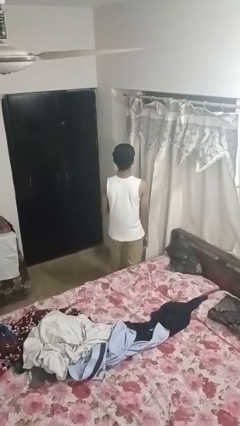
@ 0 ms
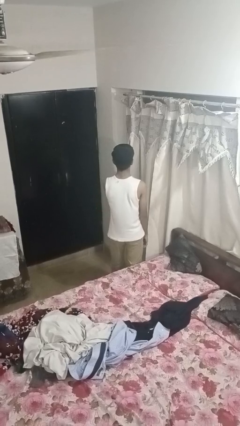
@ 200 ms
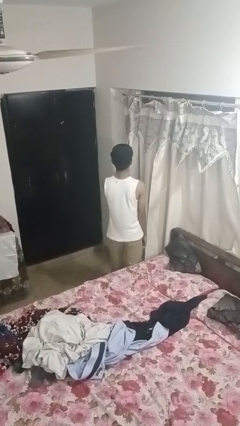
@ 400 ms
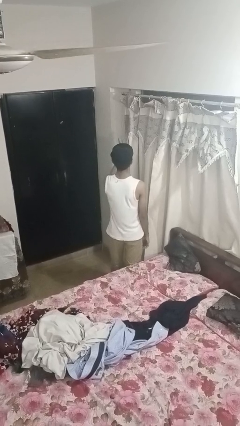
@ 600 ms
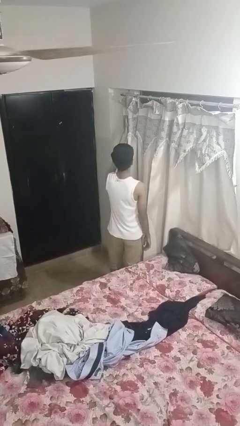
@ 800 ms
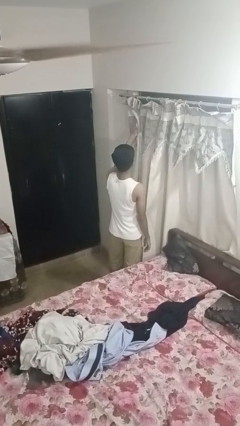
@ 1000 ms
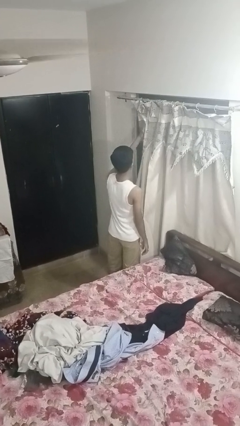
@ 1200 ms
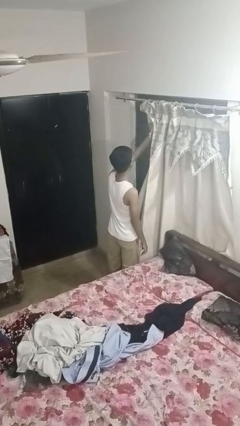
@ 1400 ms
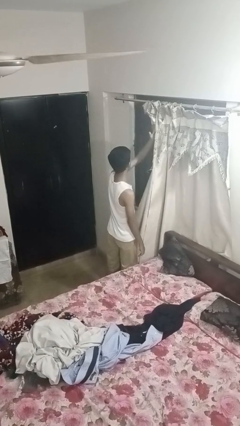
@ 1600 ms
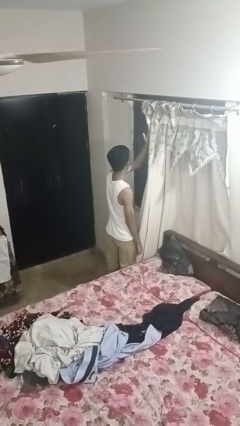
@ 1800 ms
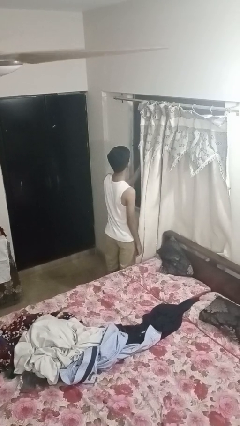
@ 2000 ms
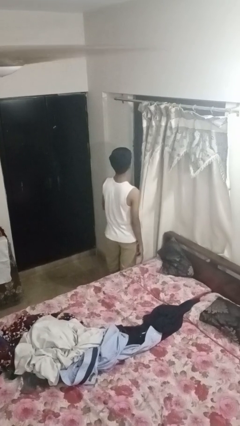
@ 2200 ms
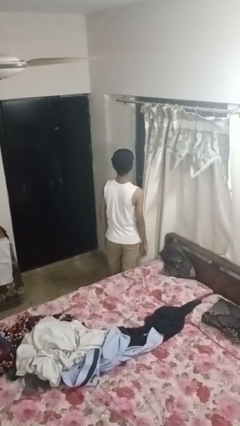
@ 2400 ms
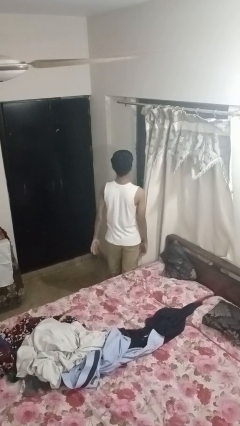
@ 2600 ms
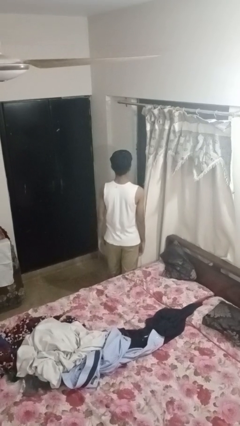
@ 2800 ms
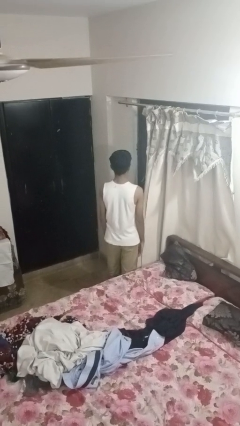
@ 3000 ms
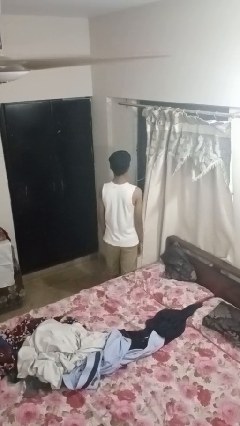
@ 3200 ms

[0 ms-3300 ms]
person opens curtains

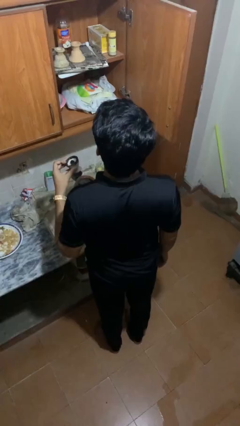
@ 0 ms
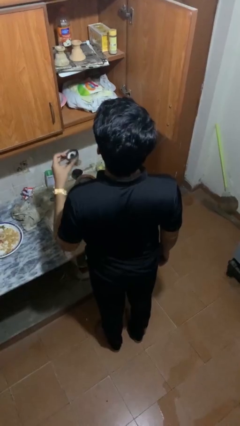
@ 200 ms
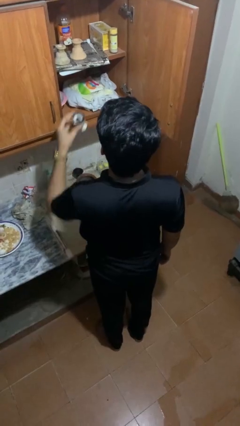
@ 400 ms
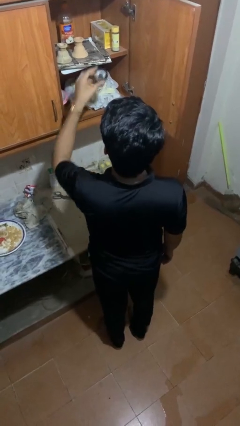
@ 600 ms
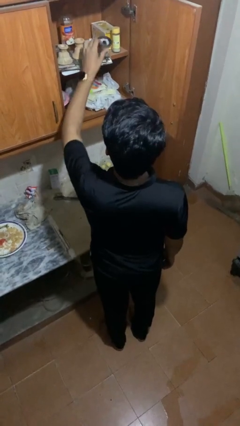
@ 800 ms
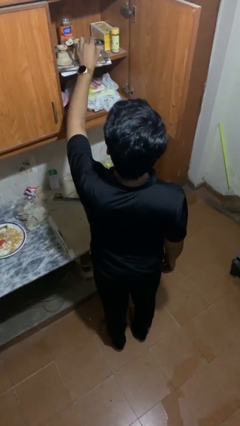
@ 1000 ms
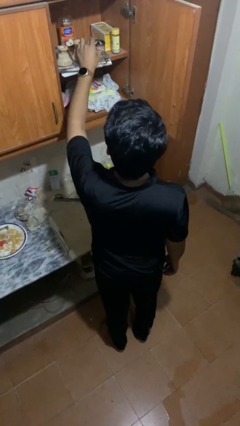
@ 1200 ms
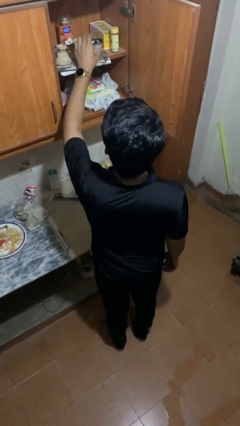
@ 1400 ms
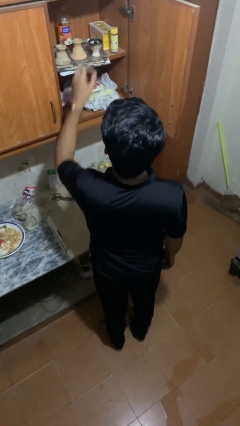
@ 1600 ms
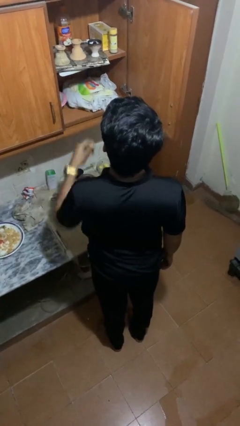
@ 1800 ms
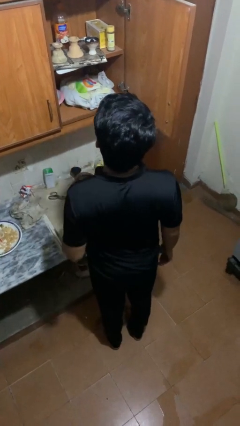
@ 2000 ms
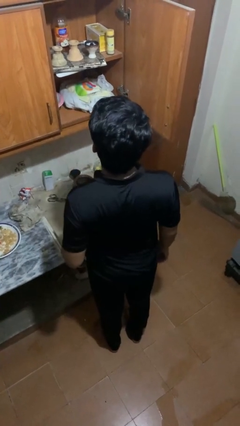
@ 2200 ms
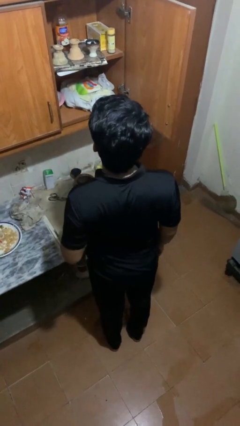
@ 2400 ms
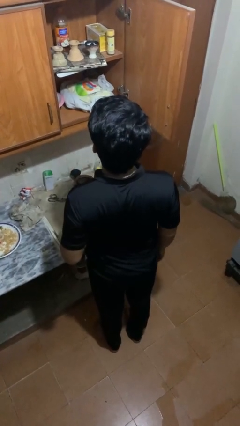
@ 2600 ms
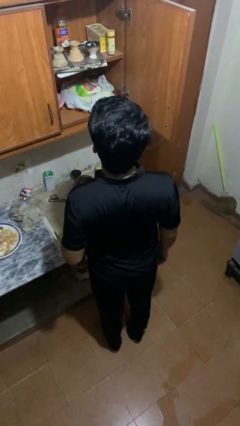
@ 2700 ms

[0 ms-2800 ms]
person puts object in cabinet

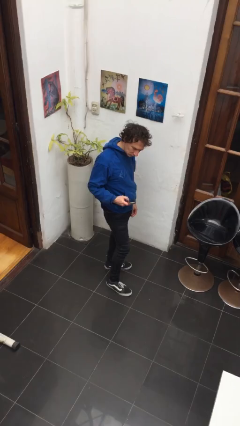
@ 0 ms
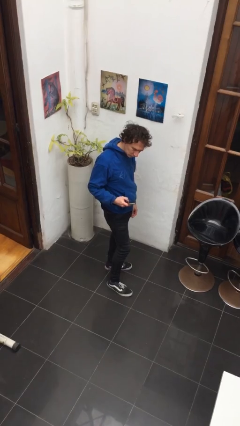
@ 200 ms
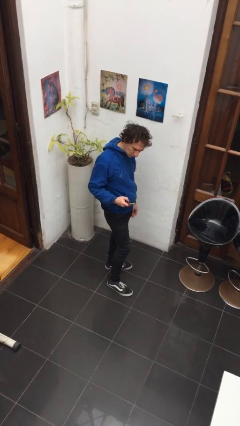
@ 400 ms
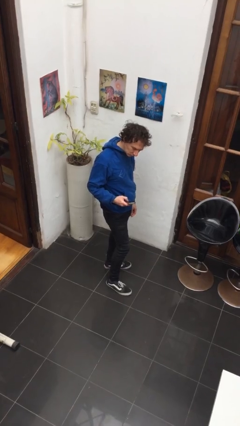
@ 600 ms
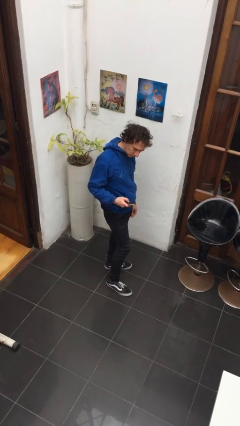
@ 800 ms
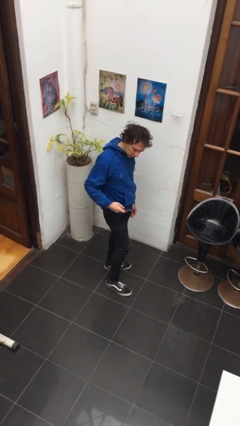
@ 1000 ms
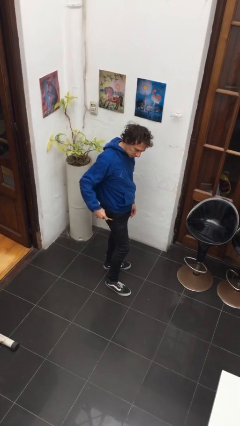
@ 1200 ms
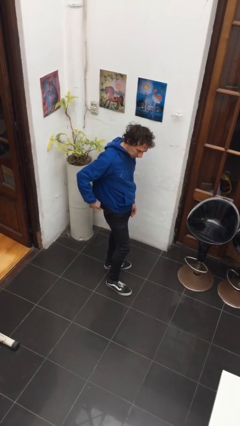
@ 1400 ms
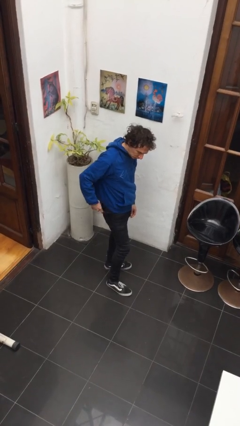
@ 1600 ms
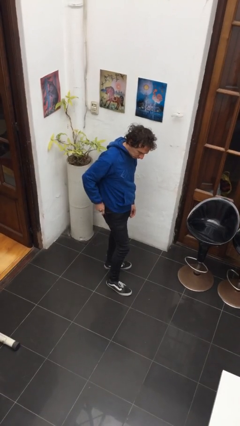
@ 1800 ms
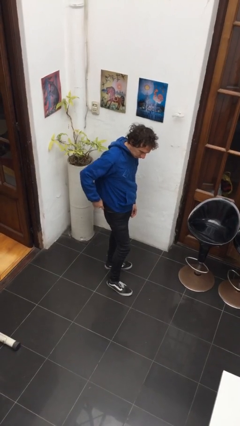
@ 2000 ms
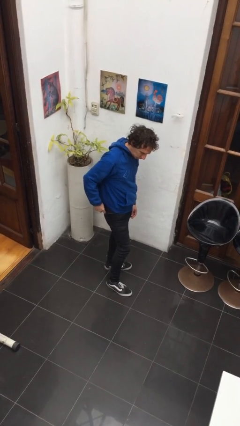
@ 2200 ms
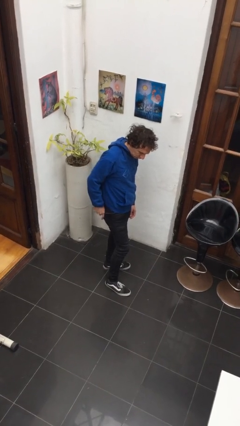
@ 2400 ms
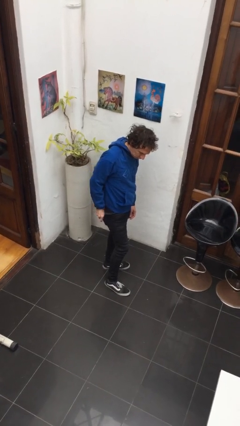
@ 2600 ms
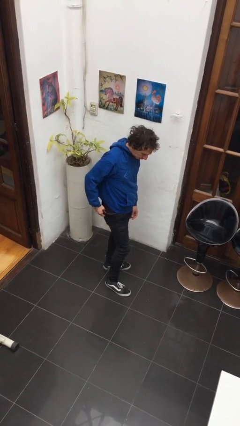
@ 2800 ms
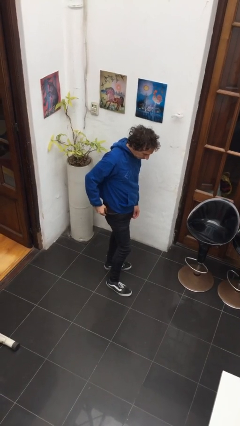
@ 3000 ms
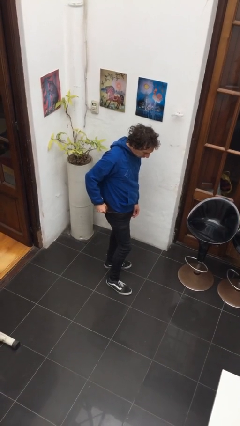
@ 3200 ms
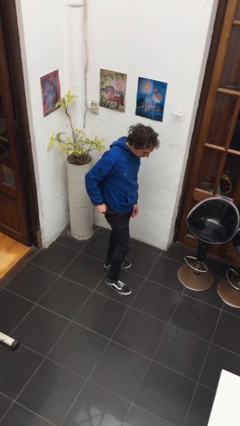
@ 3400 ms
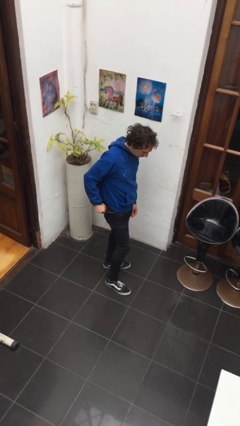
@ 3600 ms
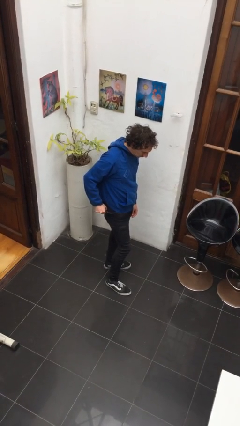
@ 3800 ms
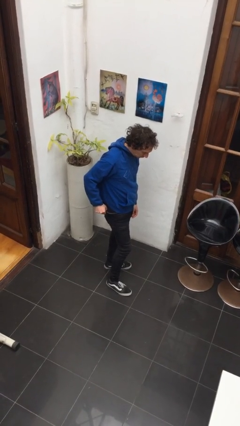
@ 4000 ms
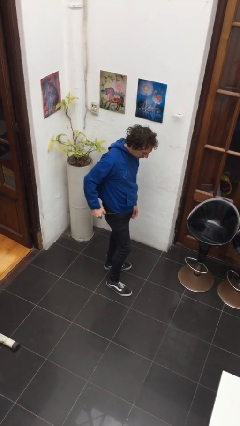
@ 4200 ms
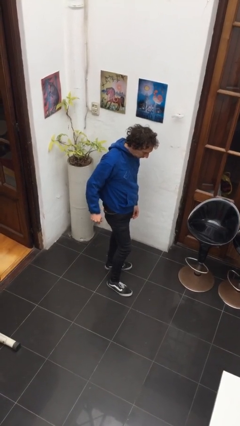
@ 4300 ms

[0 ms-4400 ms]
person puts phone into pocket

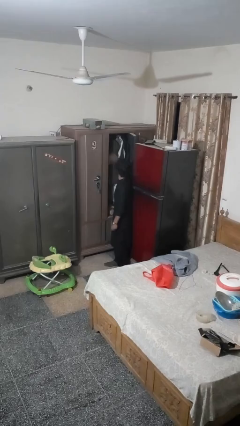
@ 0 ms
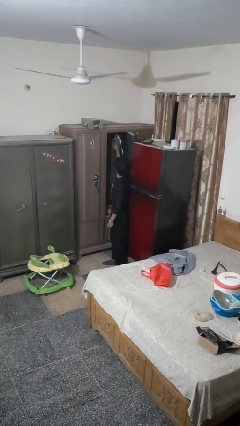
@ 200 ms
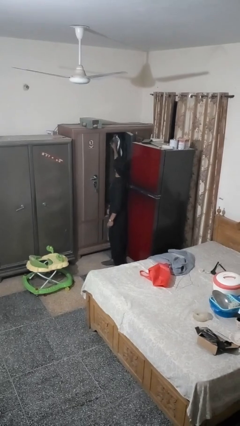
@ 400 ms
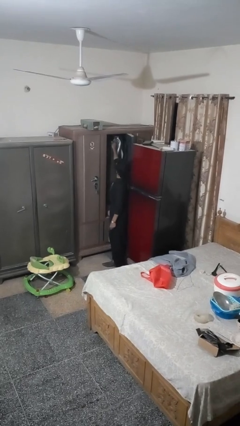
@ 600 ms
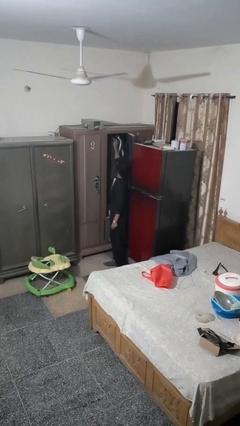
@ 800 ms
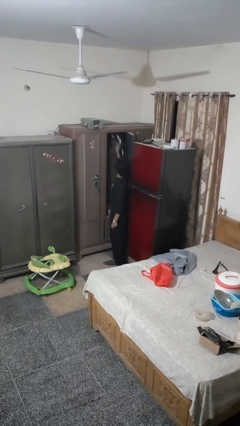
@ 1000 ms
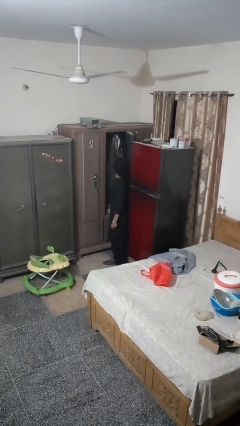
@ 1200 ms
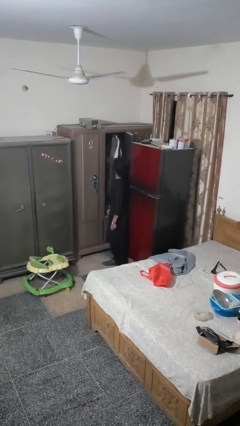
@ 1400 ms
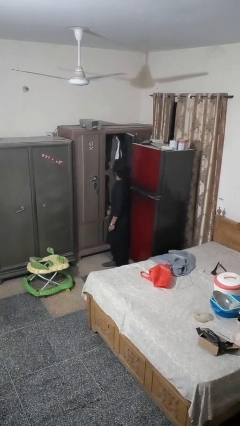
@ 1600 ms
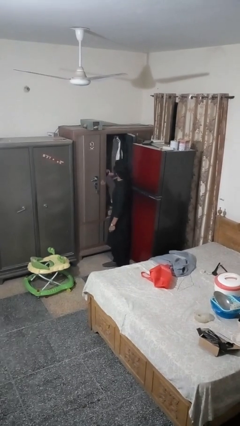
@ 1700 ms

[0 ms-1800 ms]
person takes clothes from closet

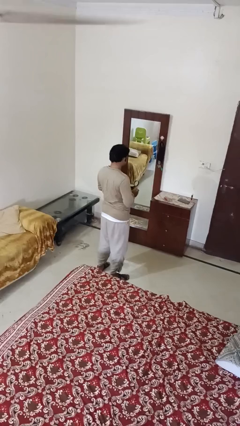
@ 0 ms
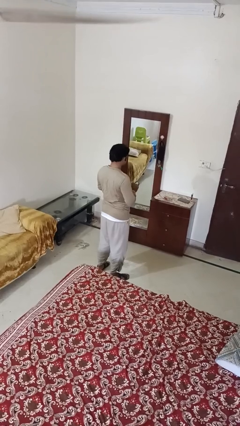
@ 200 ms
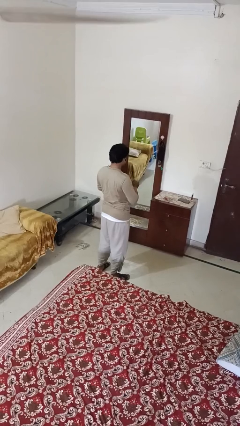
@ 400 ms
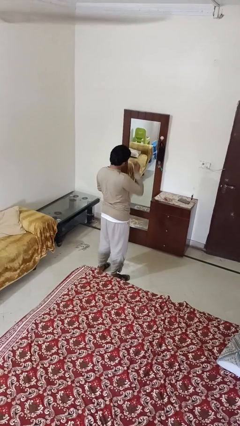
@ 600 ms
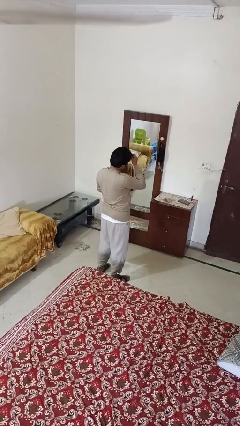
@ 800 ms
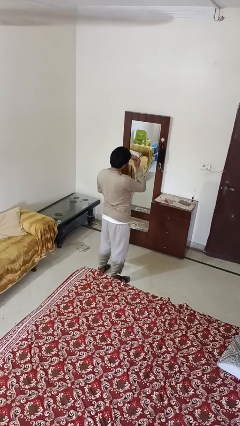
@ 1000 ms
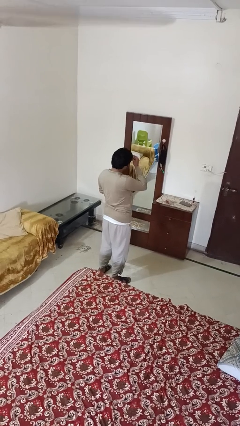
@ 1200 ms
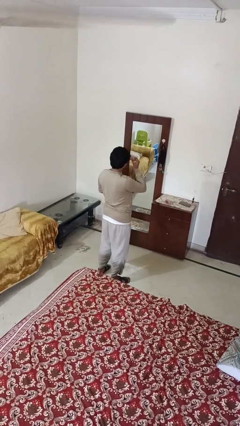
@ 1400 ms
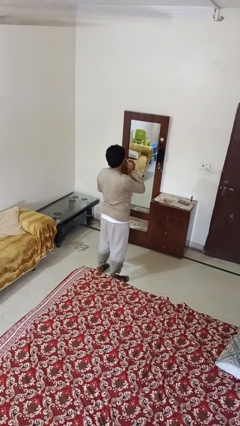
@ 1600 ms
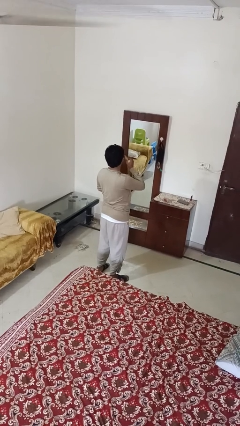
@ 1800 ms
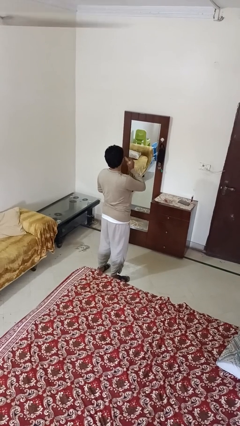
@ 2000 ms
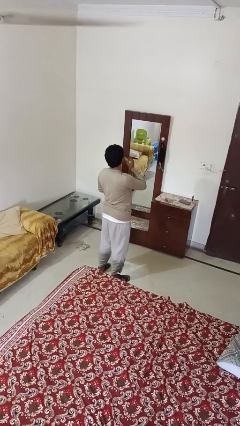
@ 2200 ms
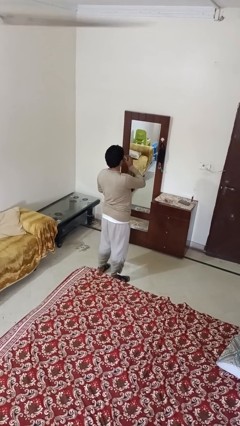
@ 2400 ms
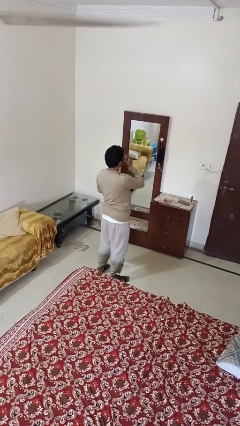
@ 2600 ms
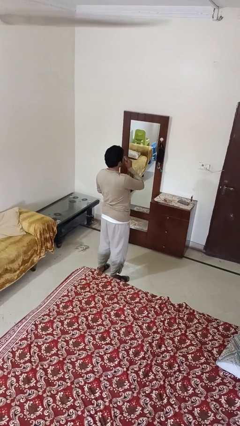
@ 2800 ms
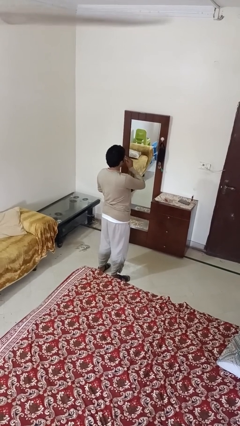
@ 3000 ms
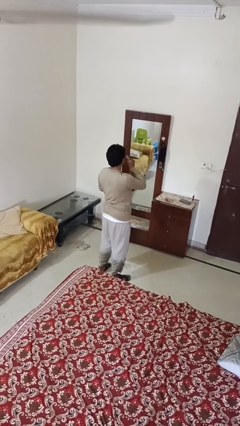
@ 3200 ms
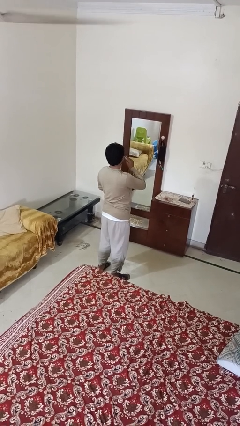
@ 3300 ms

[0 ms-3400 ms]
person applies foundation makeup

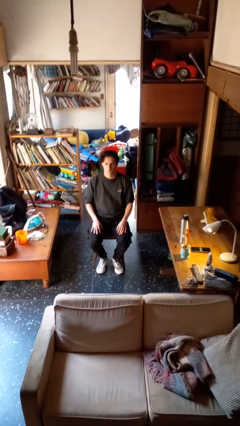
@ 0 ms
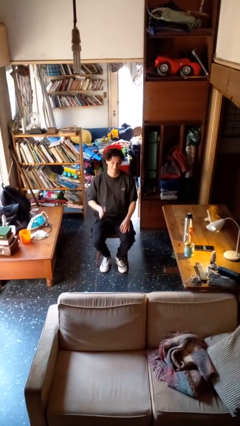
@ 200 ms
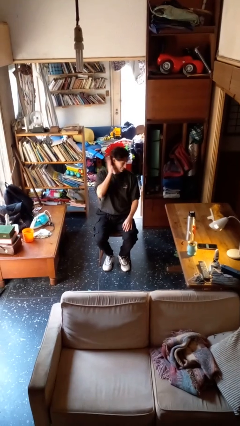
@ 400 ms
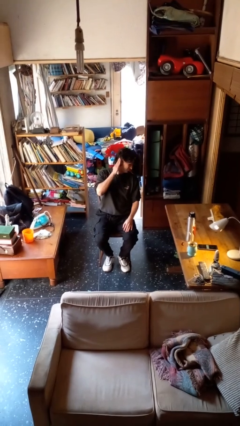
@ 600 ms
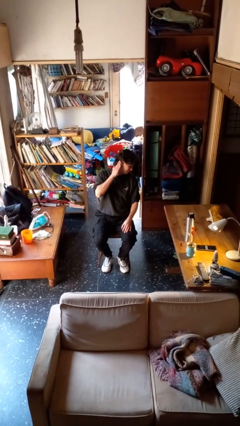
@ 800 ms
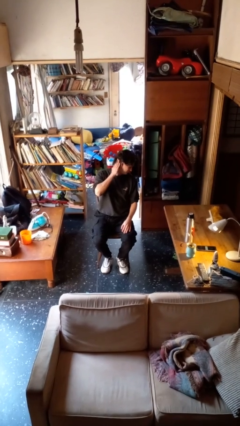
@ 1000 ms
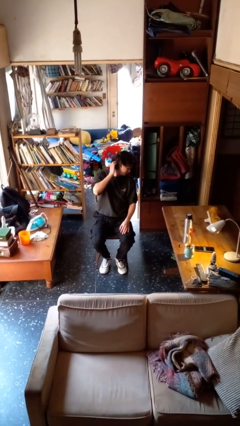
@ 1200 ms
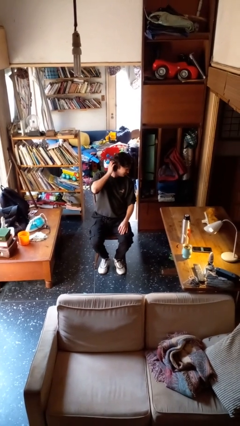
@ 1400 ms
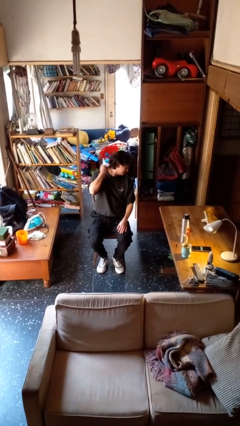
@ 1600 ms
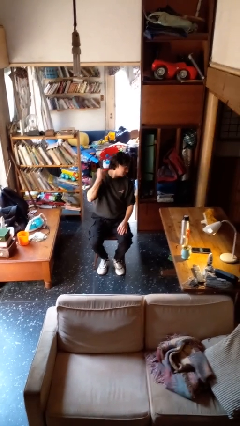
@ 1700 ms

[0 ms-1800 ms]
person swats bug
